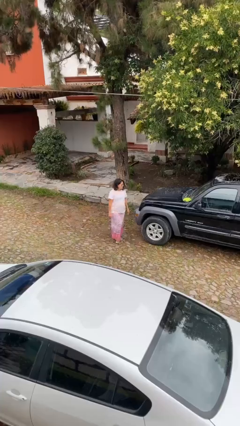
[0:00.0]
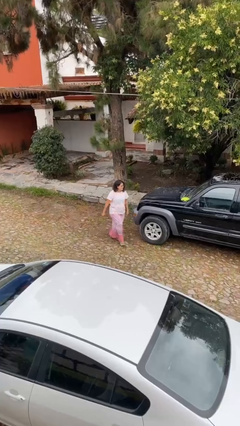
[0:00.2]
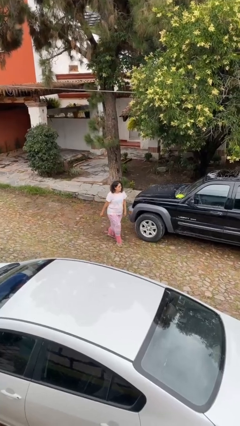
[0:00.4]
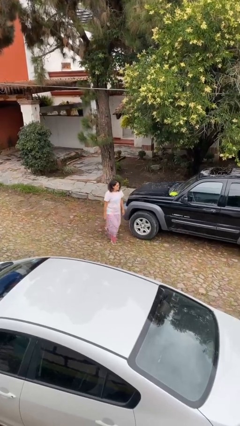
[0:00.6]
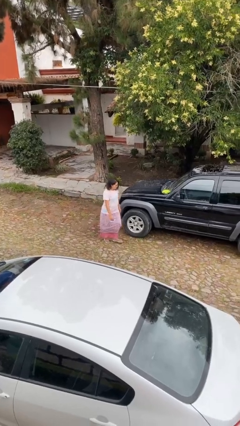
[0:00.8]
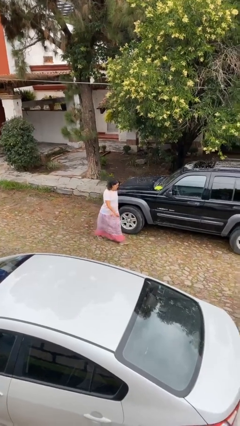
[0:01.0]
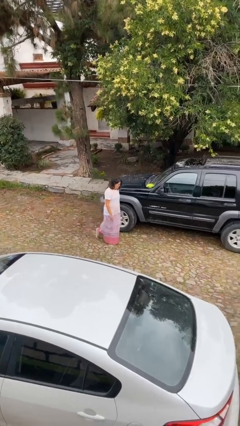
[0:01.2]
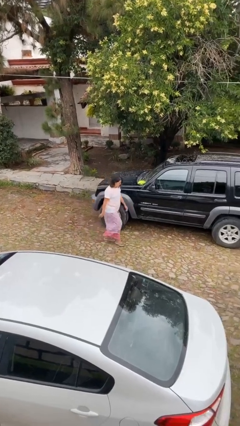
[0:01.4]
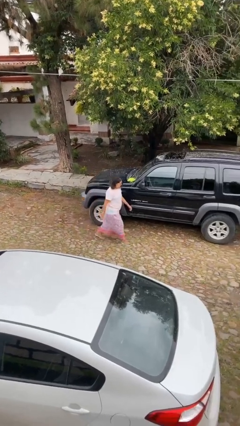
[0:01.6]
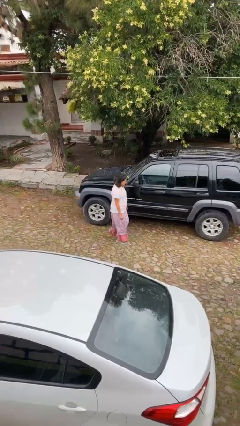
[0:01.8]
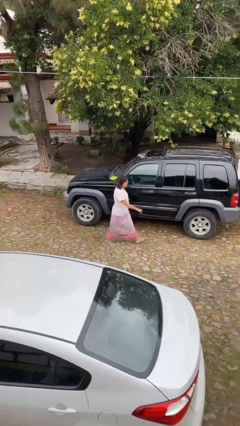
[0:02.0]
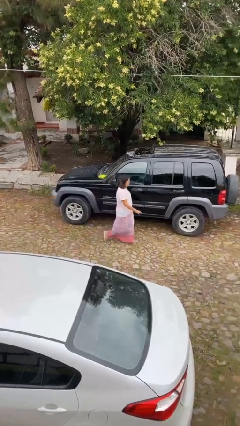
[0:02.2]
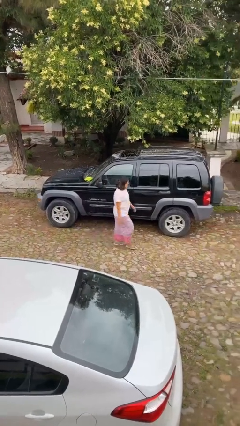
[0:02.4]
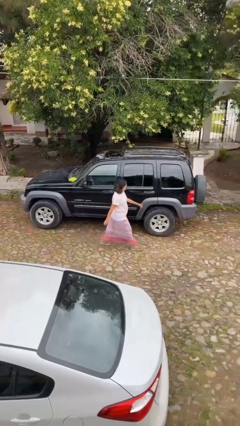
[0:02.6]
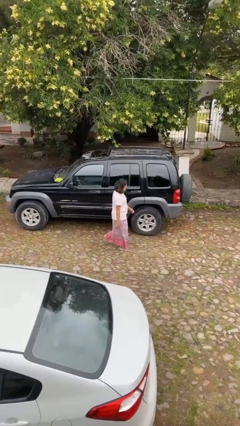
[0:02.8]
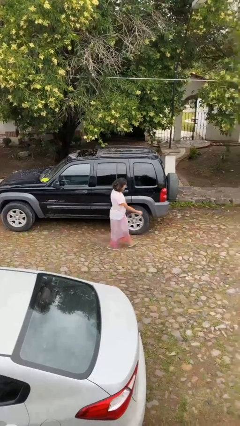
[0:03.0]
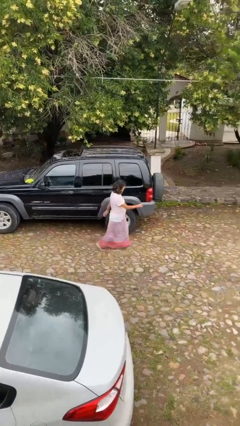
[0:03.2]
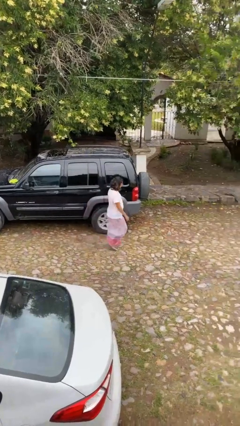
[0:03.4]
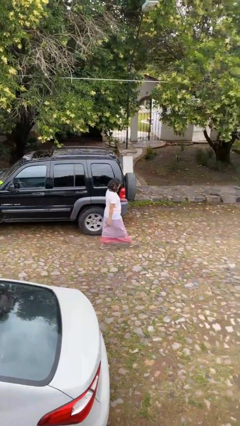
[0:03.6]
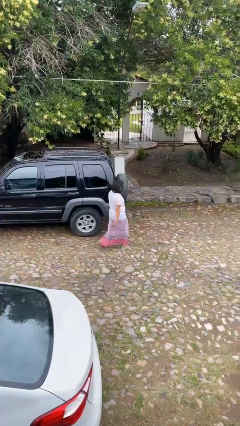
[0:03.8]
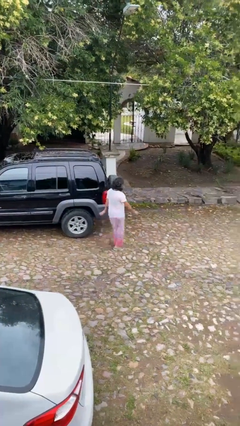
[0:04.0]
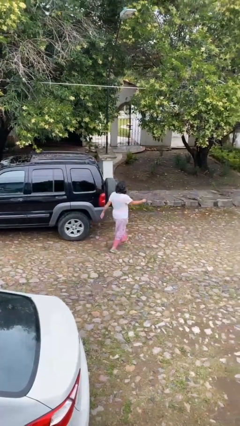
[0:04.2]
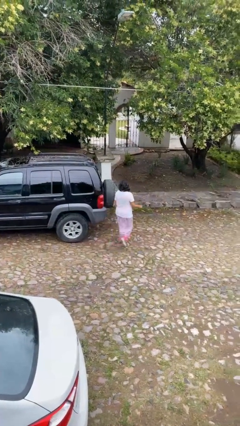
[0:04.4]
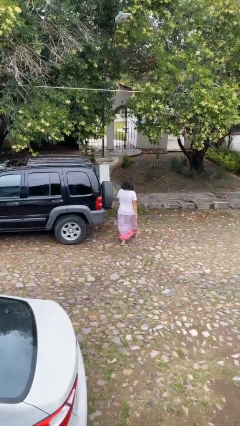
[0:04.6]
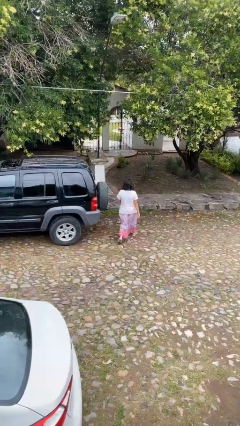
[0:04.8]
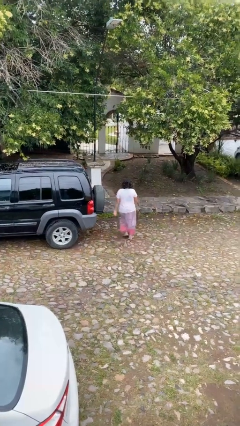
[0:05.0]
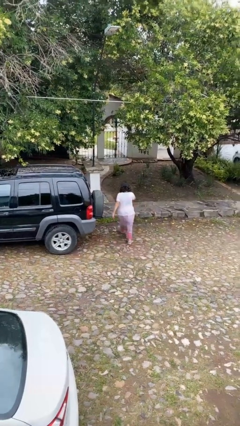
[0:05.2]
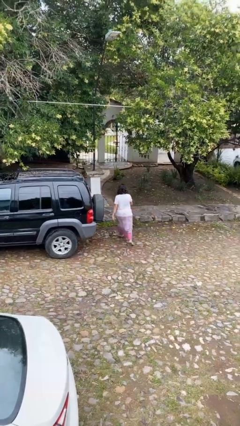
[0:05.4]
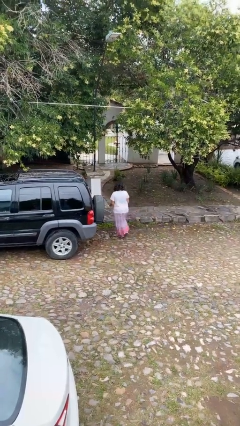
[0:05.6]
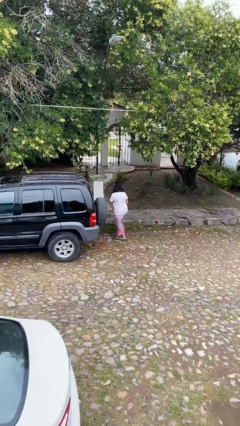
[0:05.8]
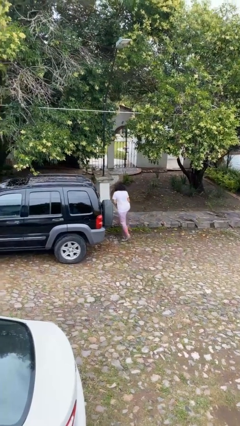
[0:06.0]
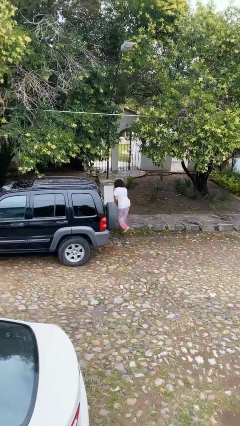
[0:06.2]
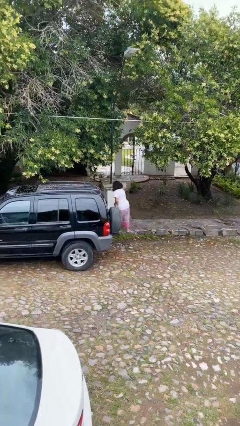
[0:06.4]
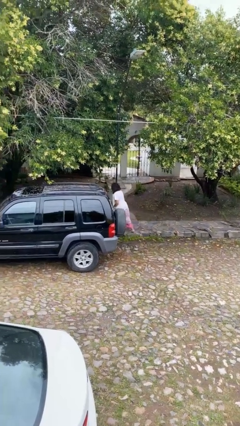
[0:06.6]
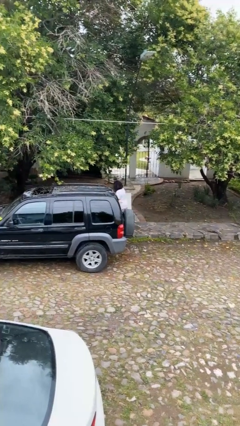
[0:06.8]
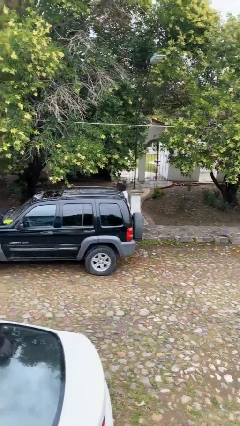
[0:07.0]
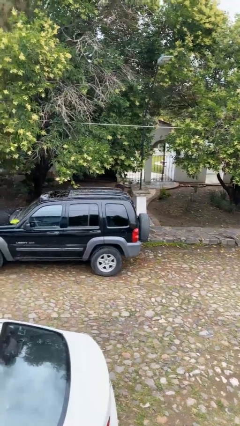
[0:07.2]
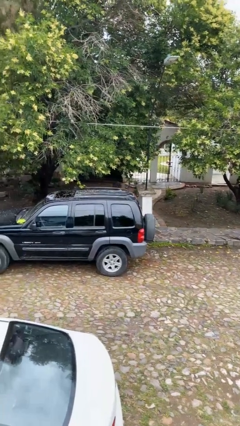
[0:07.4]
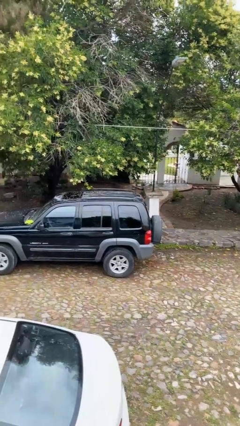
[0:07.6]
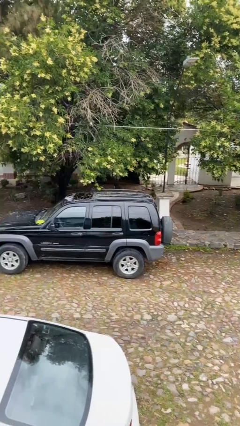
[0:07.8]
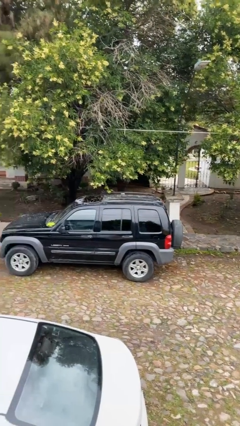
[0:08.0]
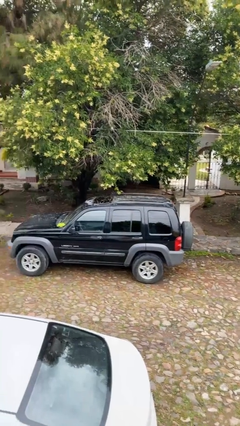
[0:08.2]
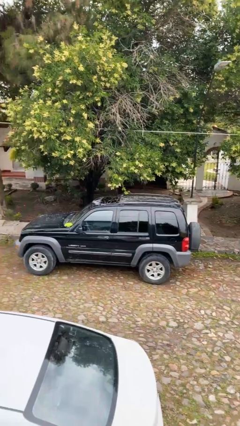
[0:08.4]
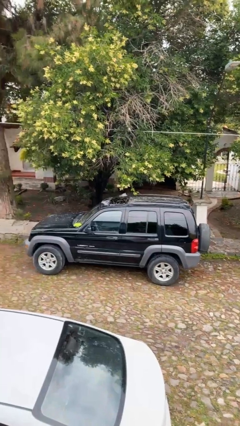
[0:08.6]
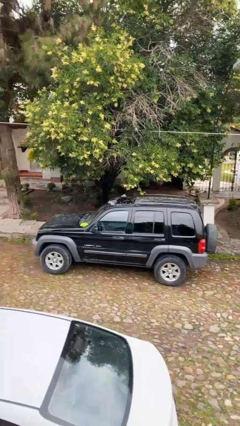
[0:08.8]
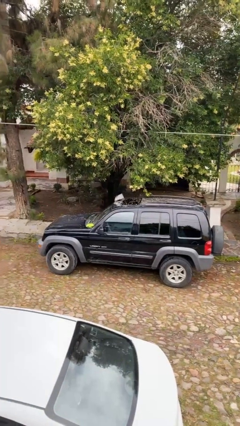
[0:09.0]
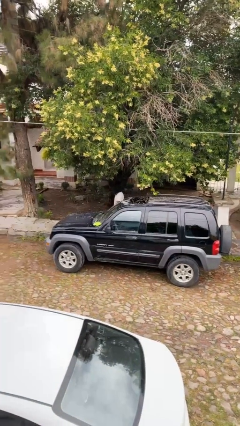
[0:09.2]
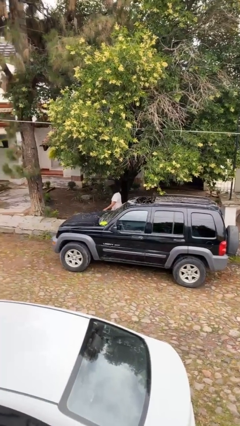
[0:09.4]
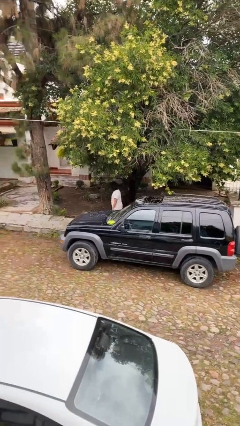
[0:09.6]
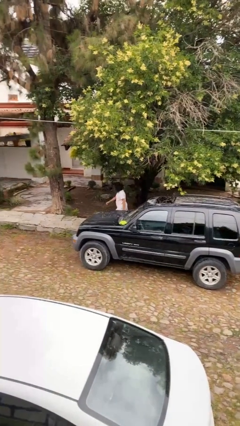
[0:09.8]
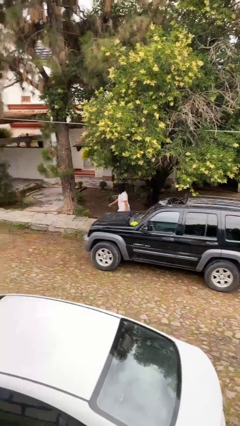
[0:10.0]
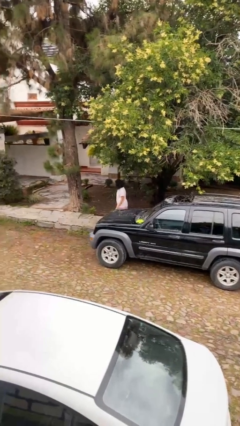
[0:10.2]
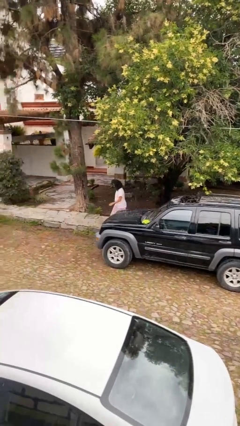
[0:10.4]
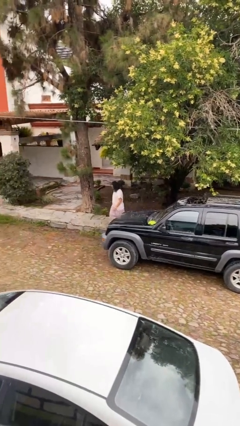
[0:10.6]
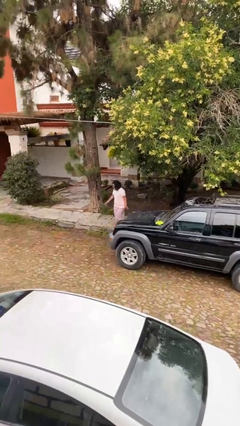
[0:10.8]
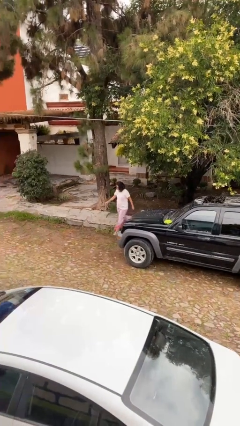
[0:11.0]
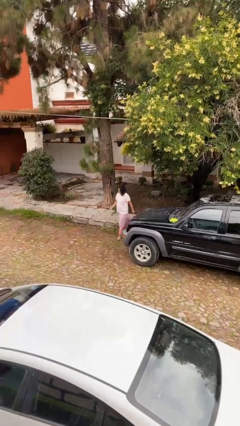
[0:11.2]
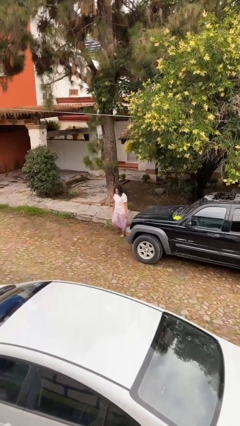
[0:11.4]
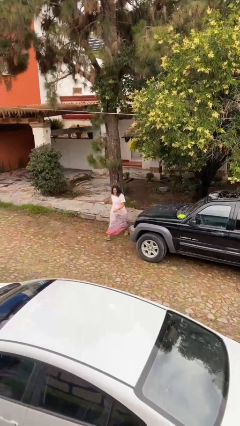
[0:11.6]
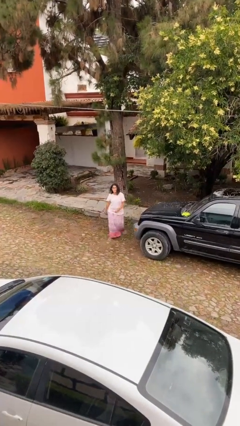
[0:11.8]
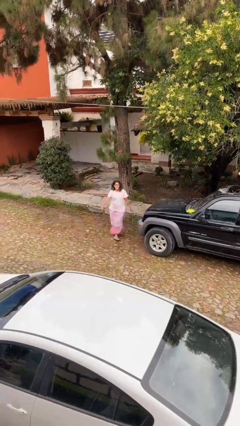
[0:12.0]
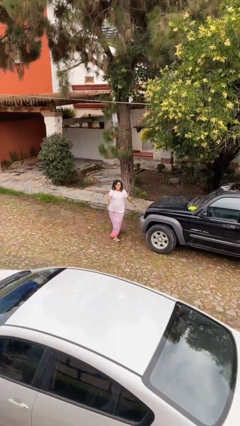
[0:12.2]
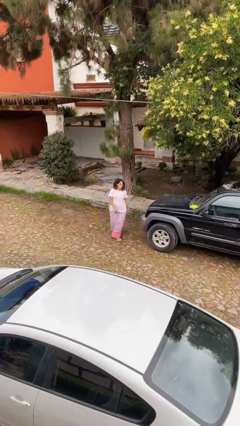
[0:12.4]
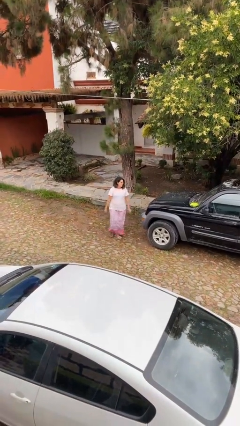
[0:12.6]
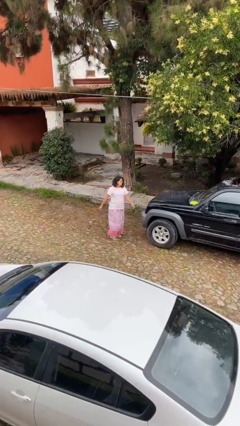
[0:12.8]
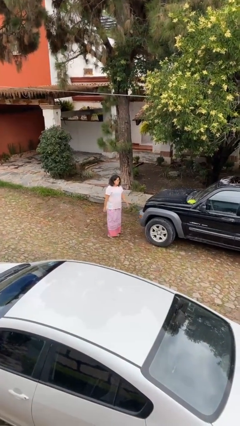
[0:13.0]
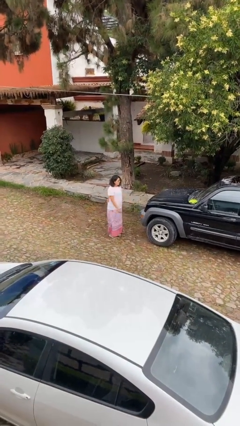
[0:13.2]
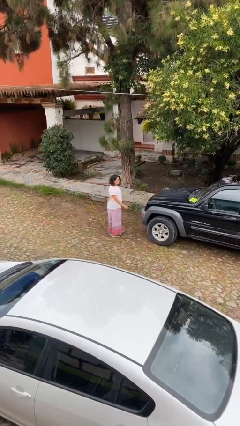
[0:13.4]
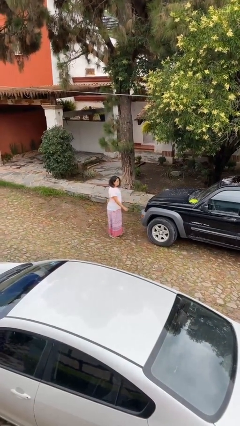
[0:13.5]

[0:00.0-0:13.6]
person walks around car

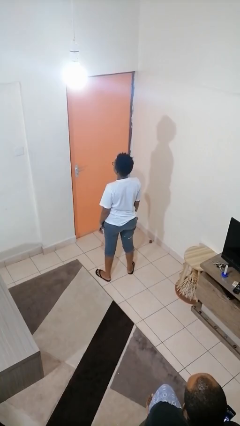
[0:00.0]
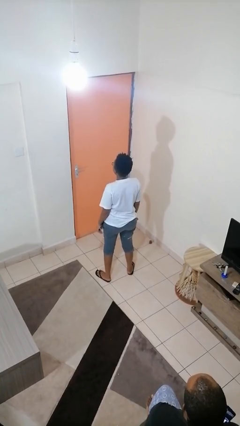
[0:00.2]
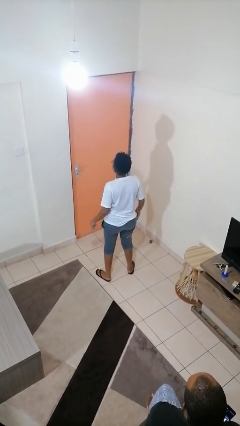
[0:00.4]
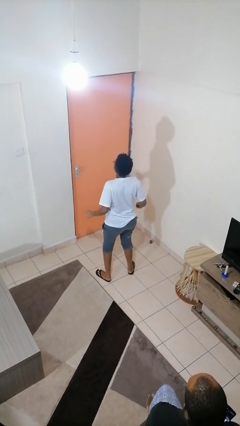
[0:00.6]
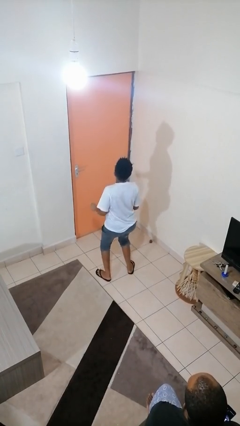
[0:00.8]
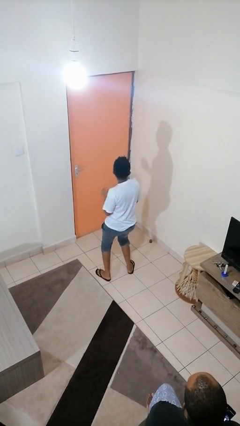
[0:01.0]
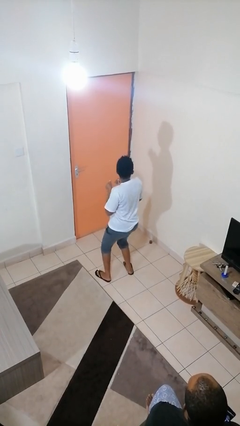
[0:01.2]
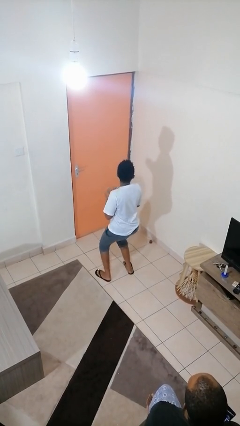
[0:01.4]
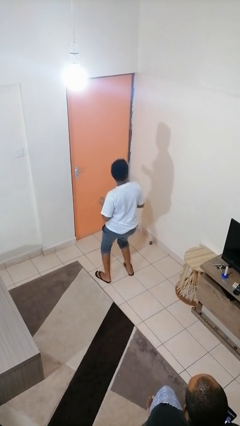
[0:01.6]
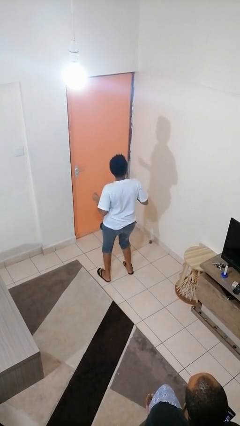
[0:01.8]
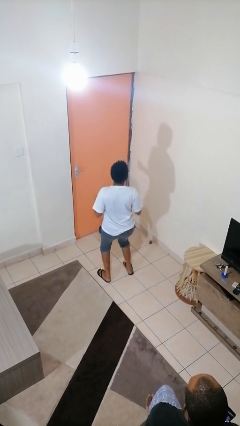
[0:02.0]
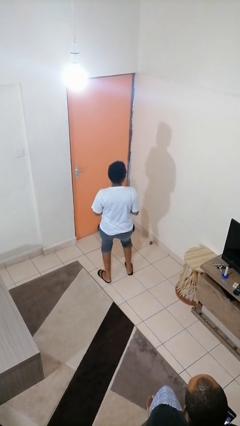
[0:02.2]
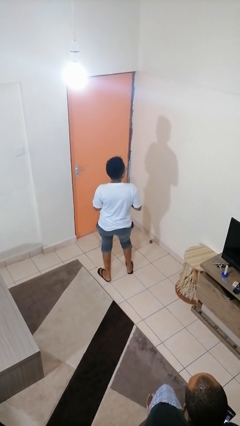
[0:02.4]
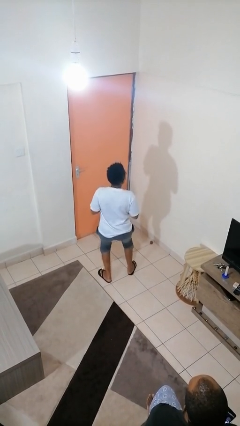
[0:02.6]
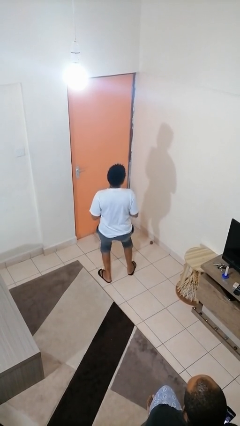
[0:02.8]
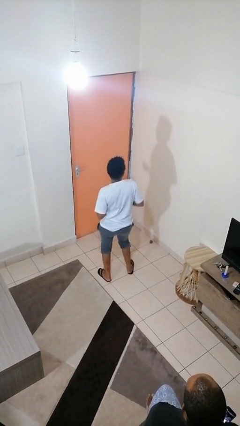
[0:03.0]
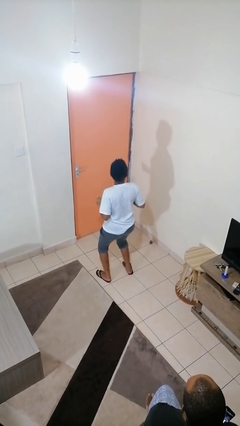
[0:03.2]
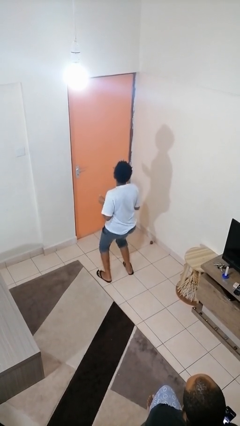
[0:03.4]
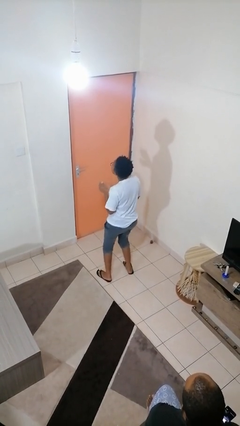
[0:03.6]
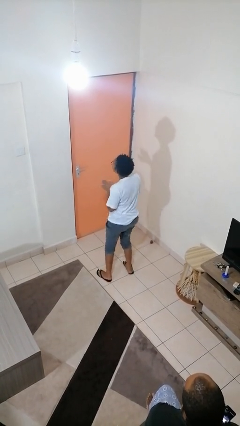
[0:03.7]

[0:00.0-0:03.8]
person dances in place

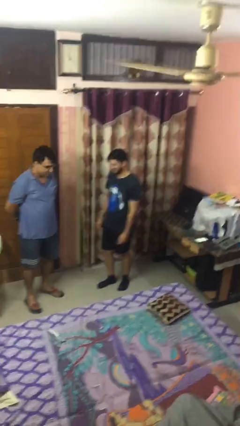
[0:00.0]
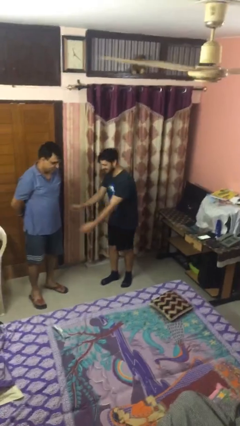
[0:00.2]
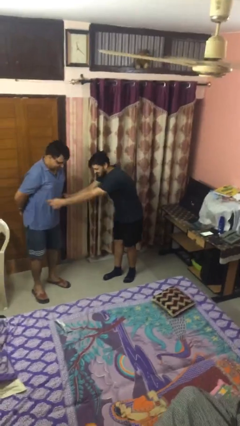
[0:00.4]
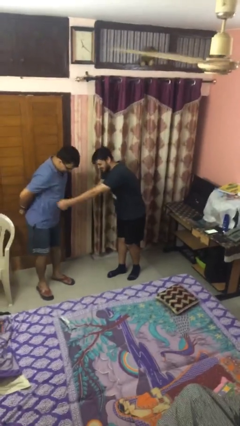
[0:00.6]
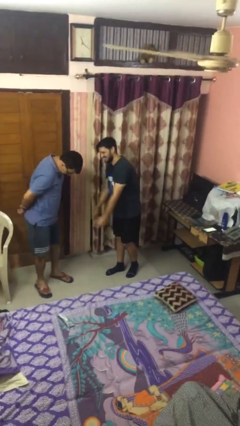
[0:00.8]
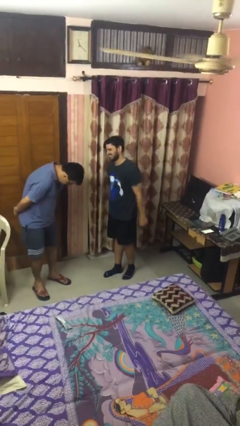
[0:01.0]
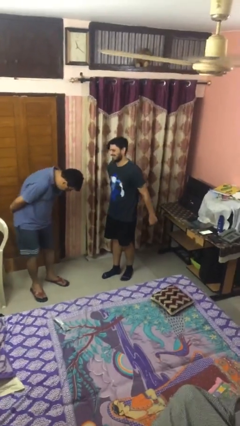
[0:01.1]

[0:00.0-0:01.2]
person tickles person
